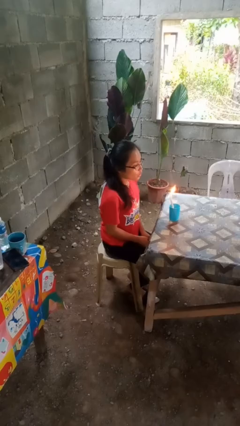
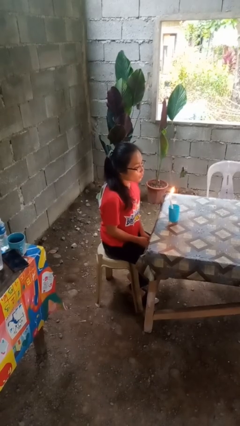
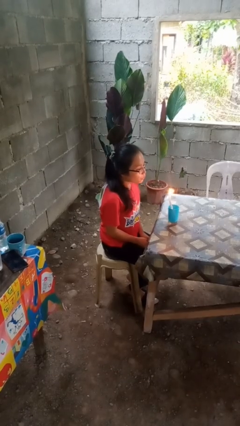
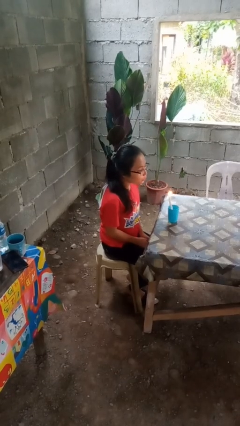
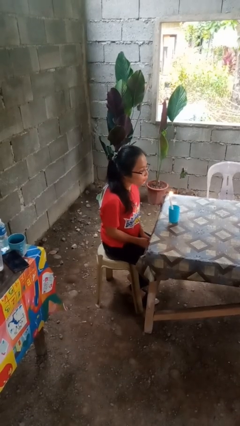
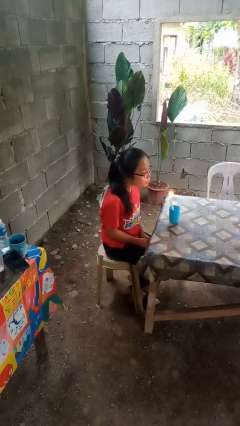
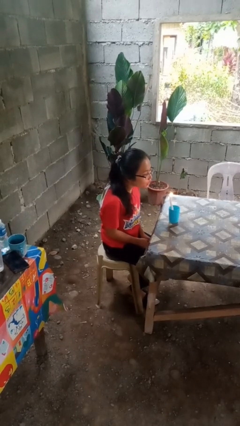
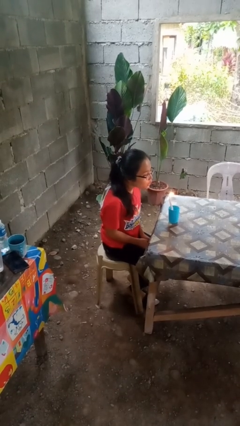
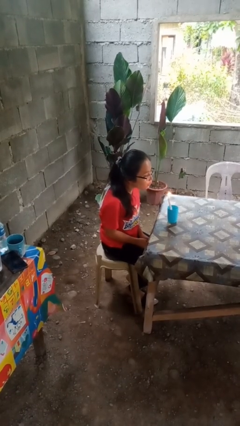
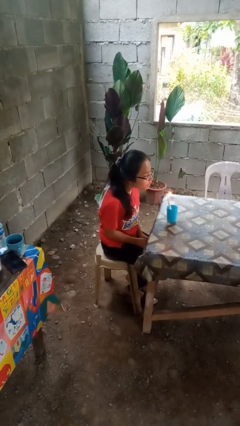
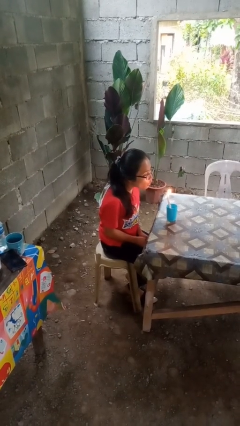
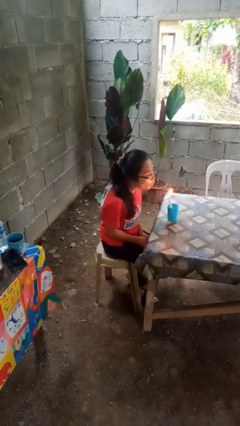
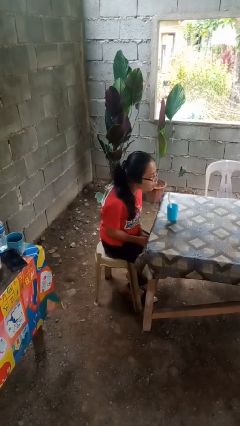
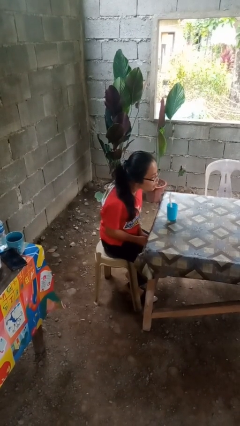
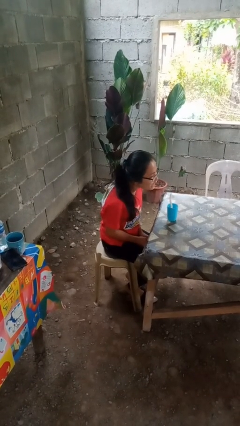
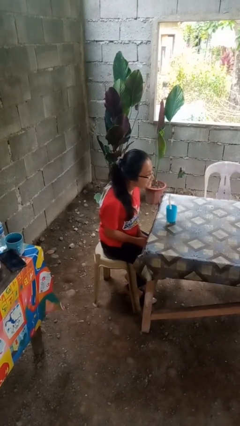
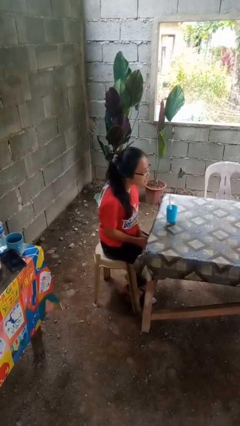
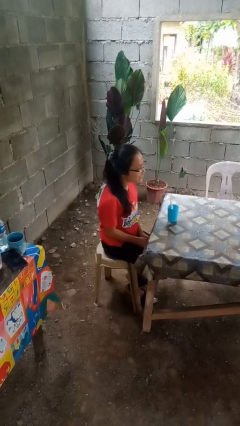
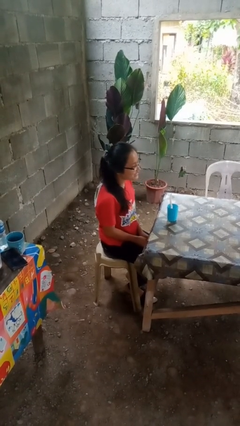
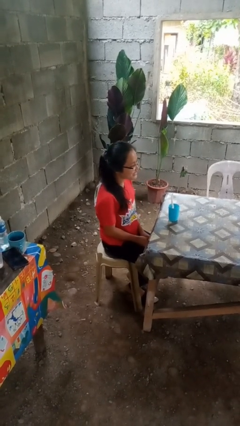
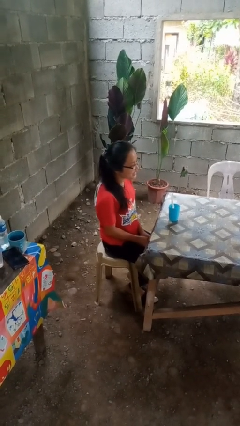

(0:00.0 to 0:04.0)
person extinguishes candle

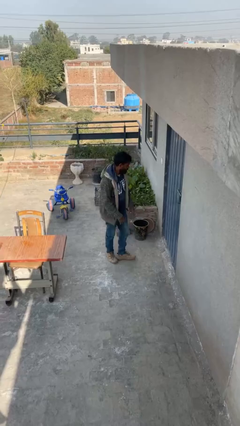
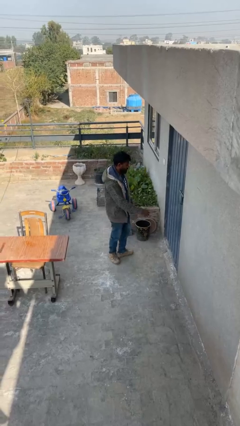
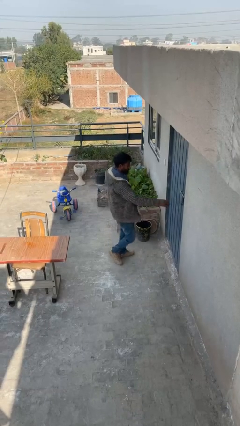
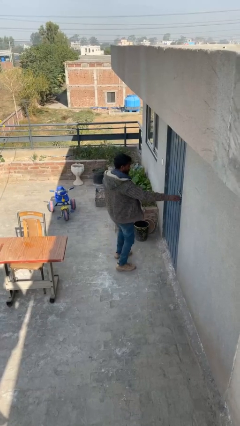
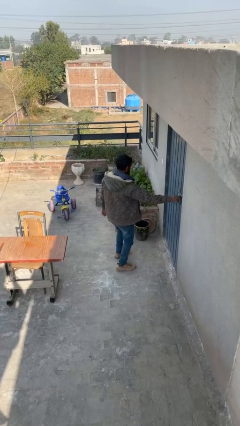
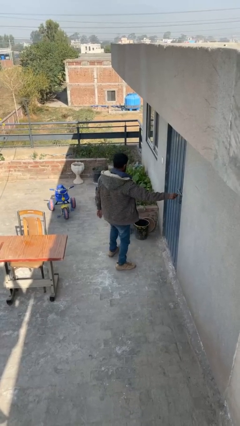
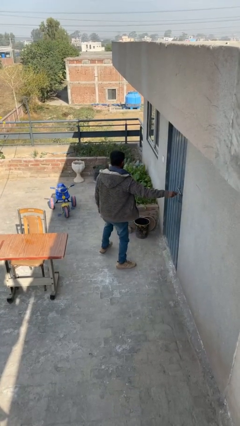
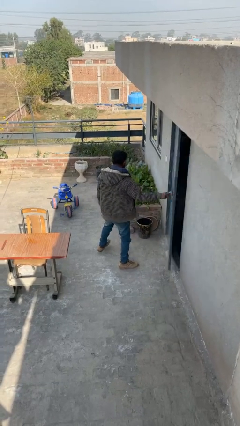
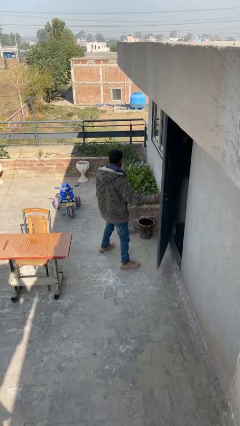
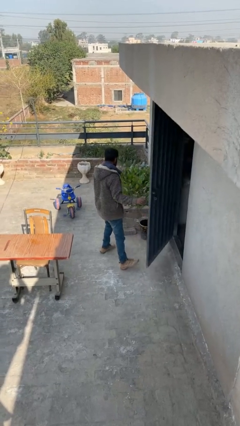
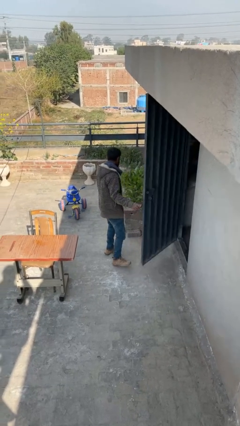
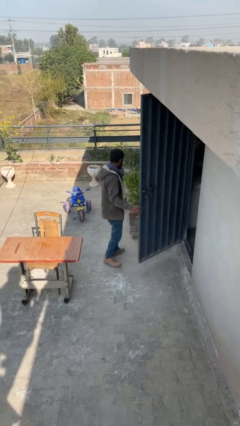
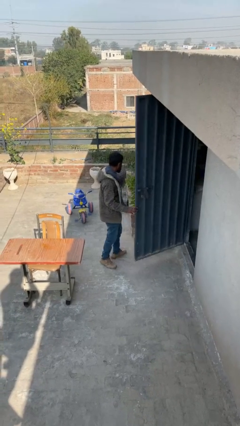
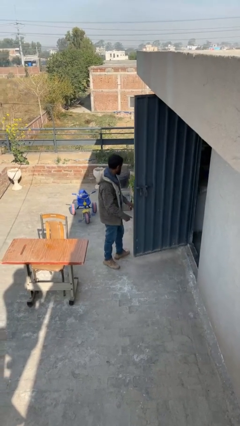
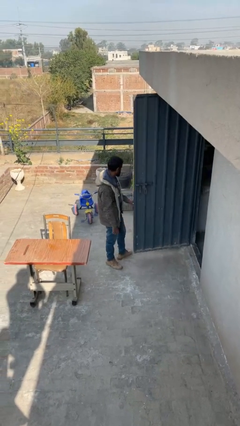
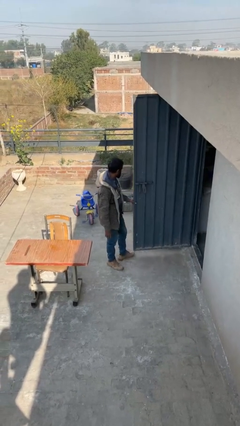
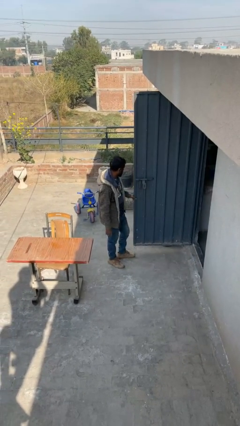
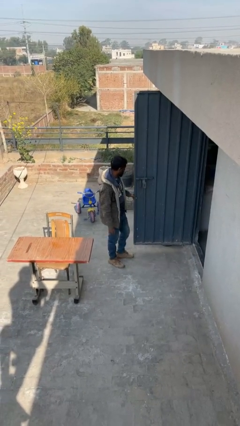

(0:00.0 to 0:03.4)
person opens facility door

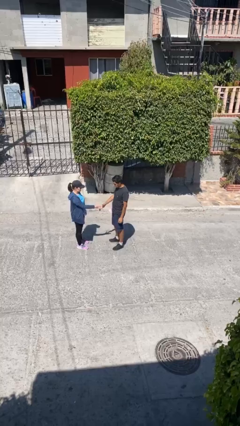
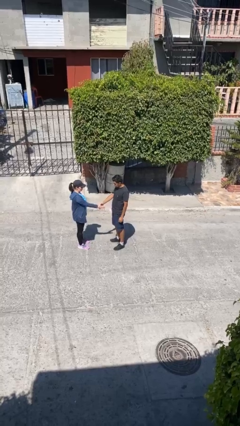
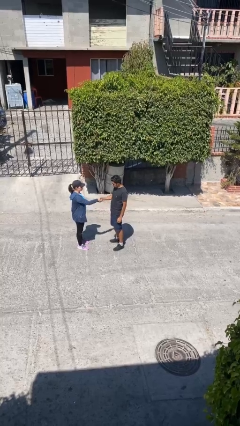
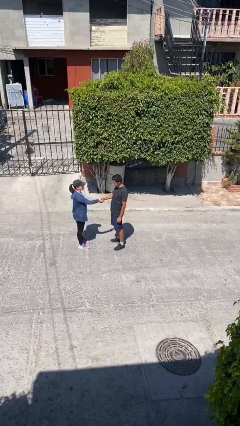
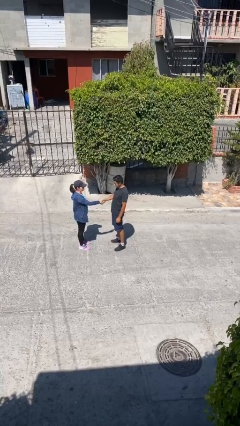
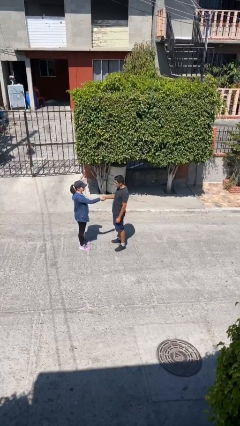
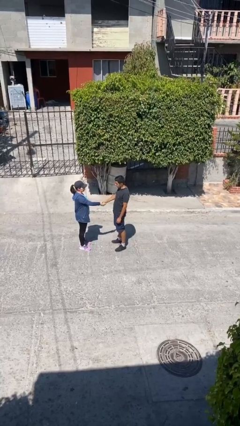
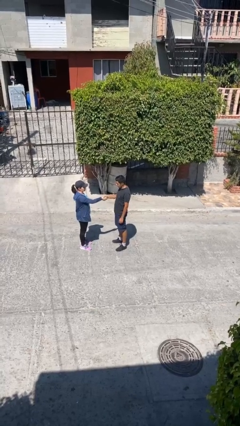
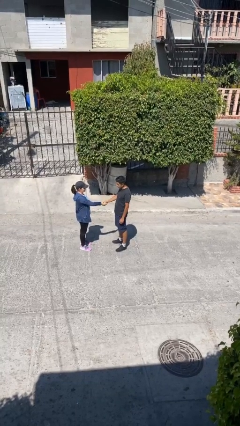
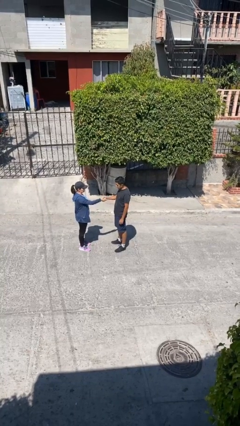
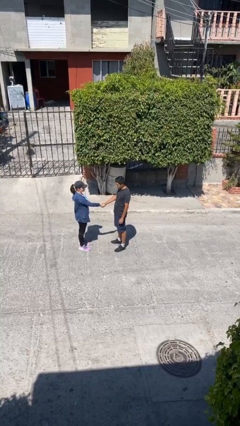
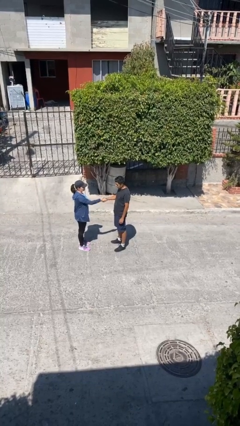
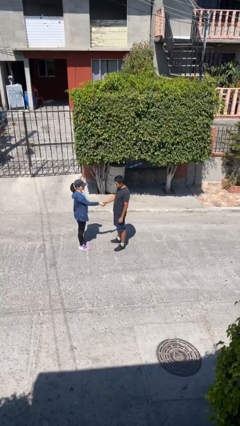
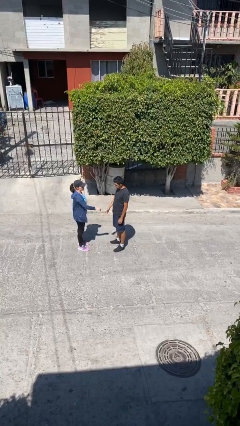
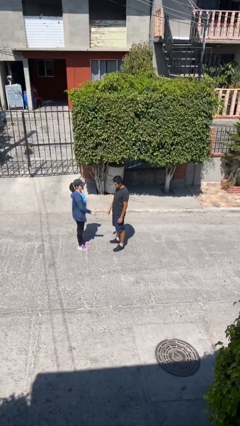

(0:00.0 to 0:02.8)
person shakes hand

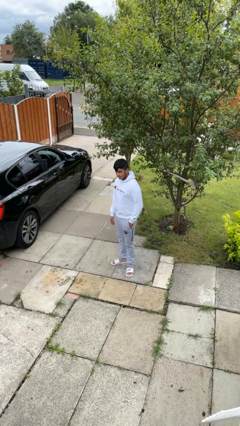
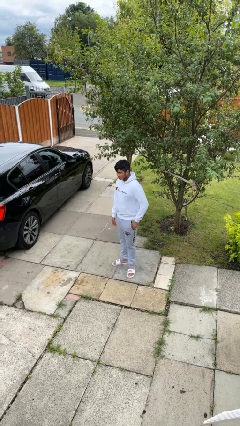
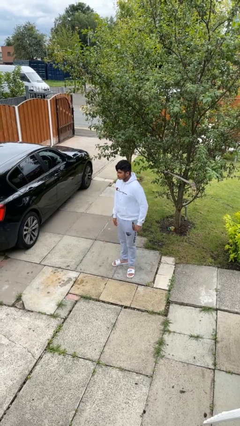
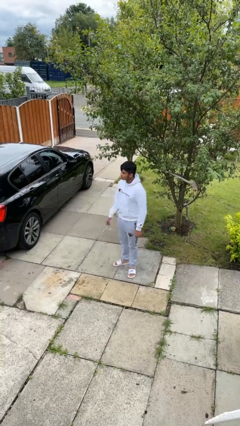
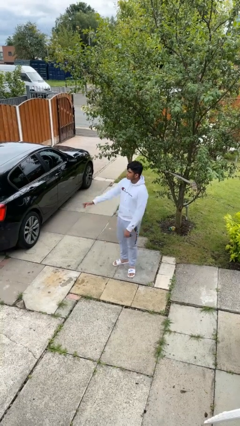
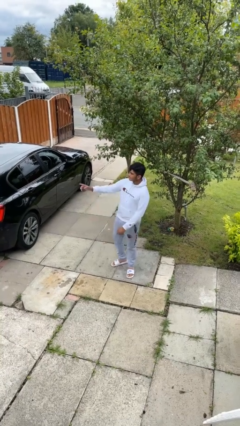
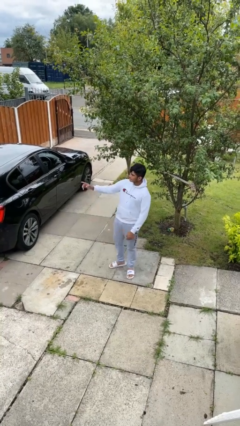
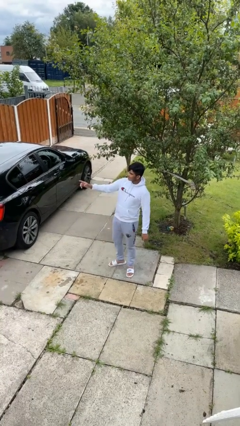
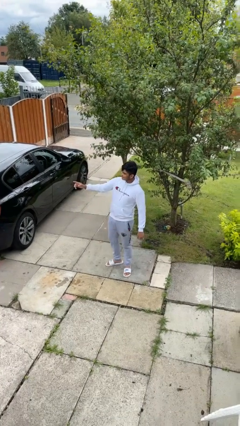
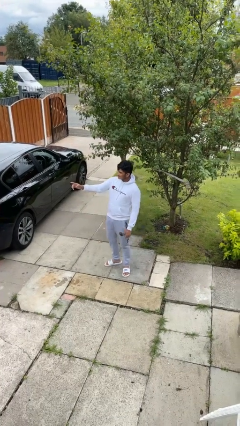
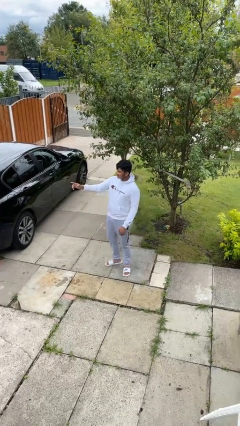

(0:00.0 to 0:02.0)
person points at person

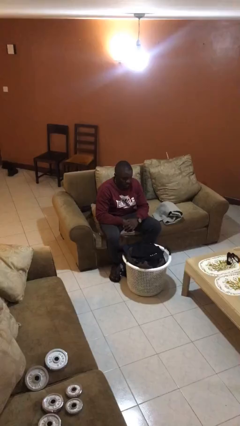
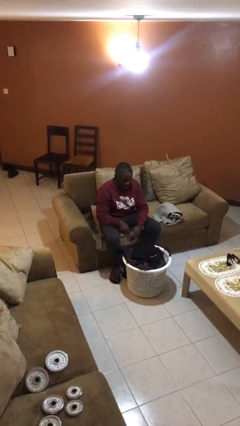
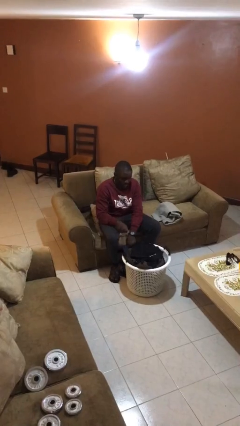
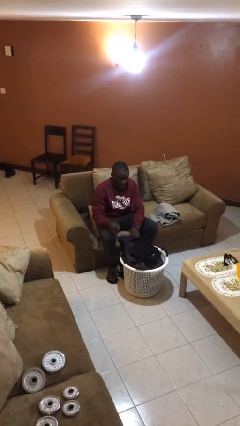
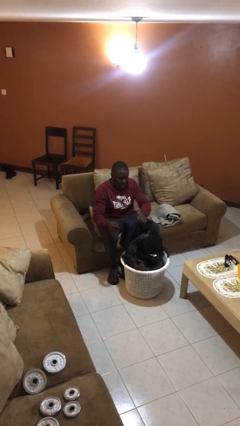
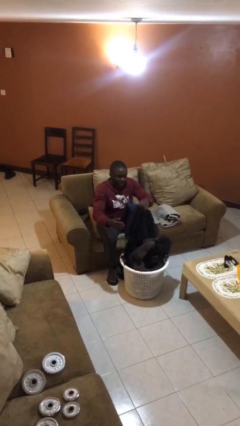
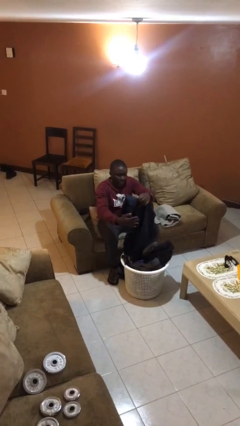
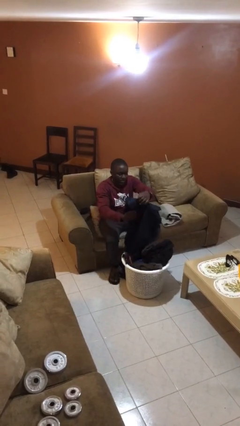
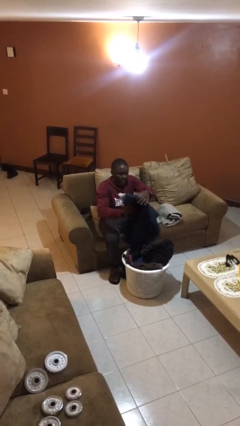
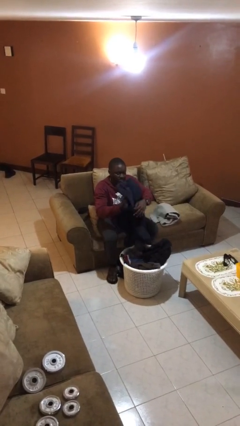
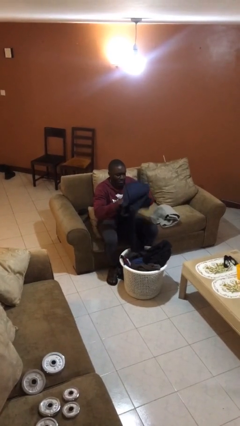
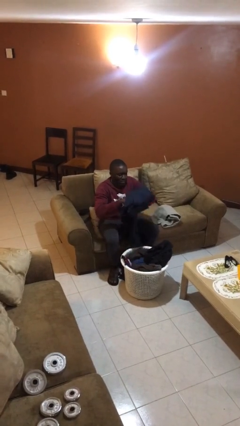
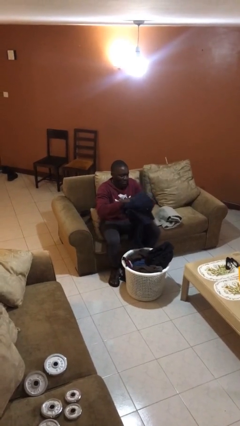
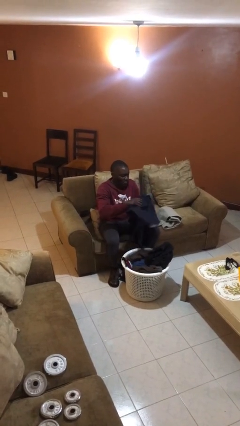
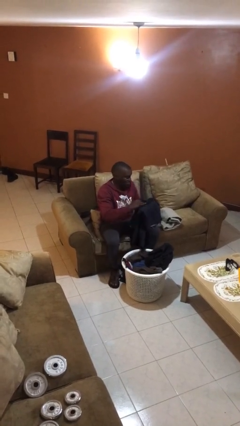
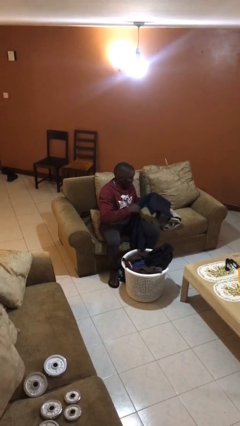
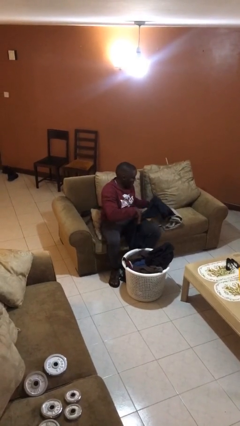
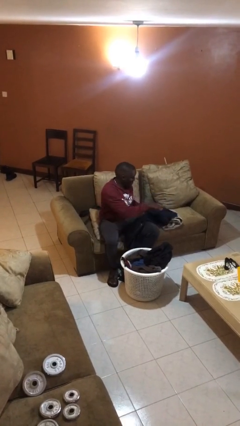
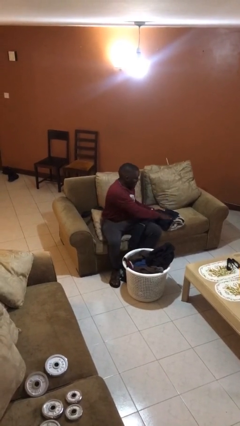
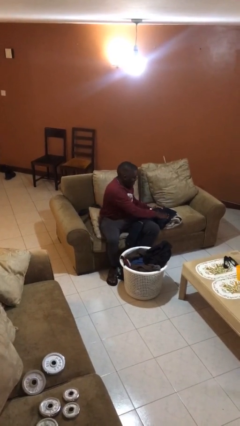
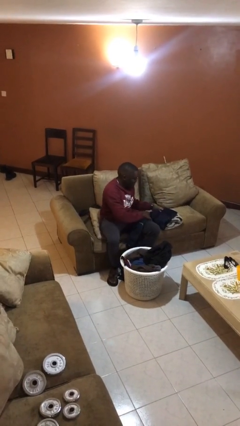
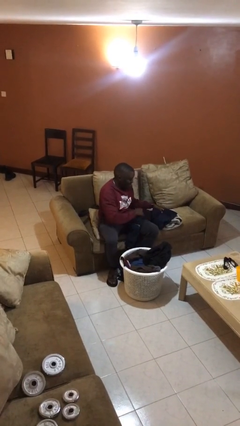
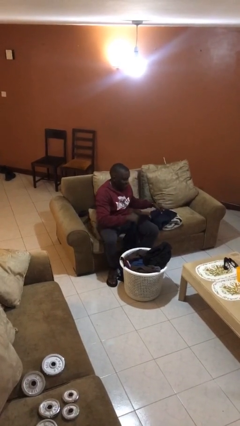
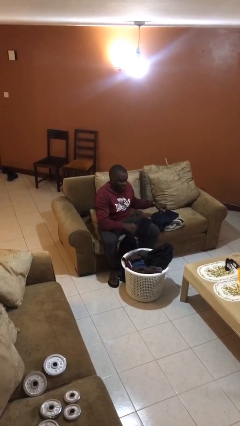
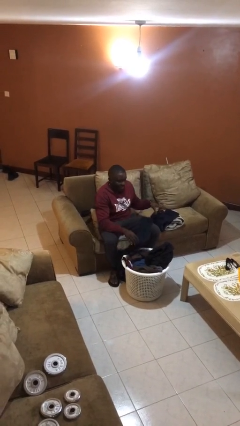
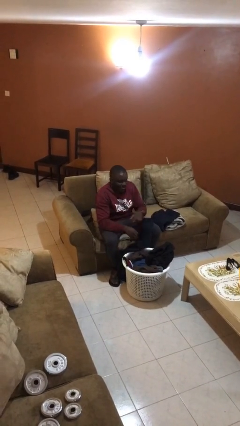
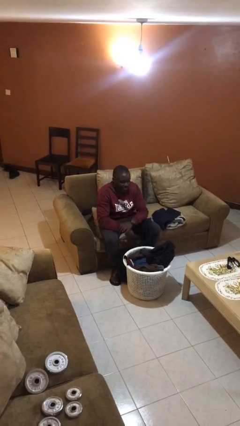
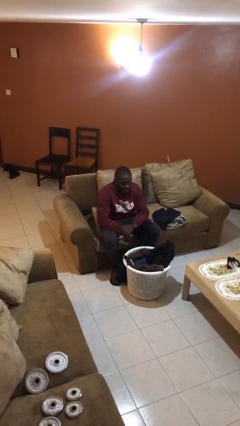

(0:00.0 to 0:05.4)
person folds pants
